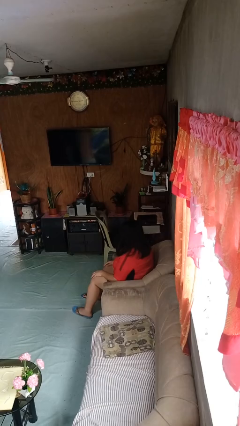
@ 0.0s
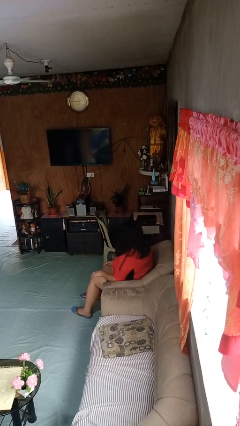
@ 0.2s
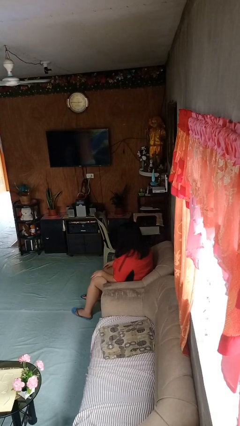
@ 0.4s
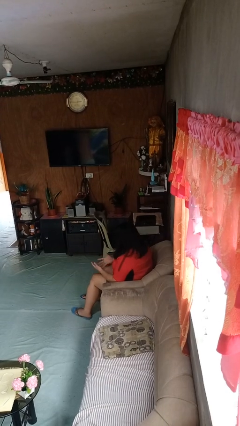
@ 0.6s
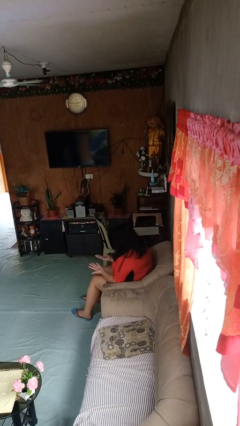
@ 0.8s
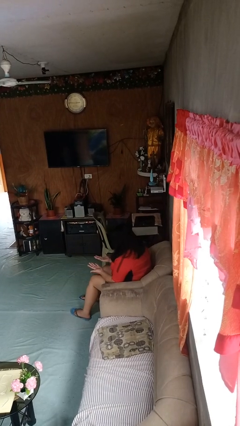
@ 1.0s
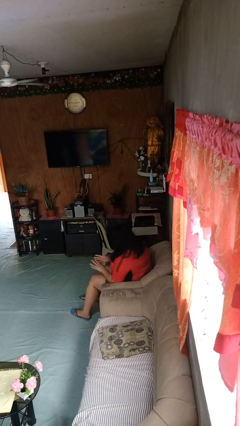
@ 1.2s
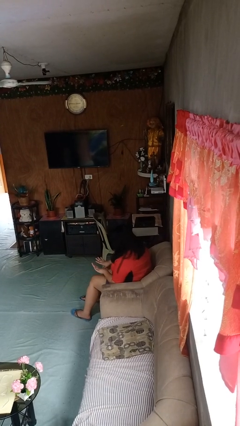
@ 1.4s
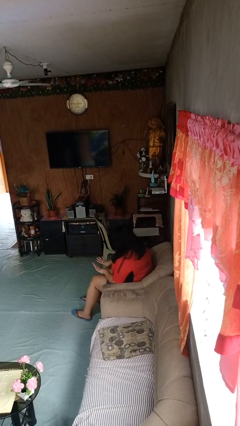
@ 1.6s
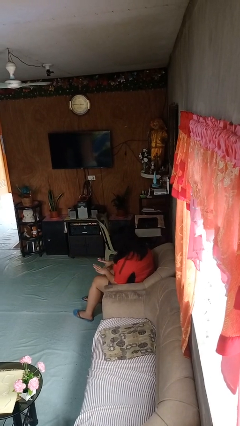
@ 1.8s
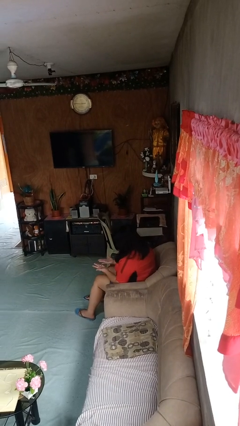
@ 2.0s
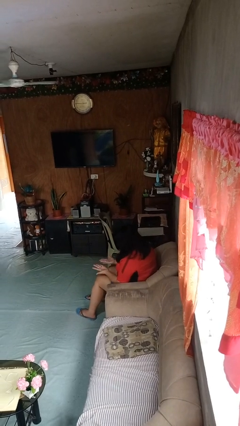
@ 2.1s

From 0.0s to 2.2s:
person looks at hands in lap

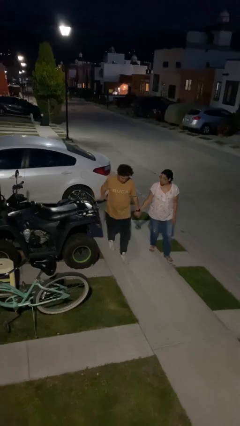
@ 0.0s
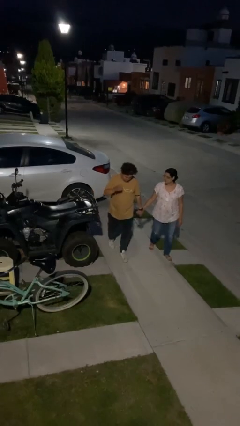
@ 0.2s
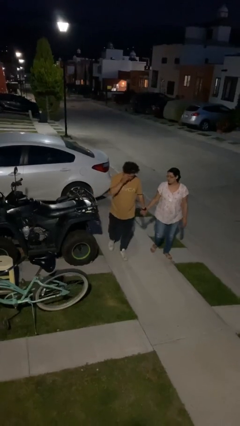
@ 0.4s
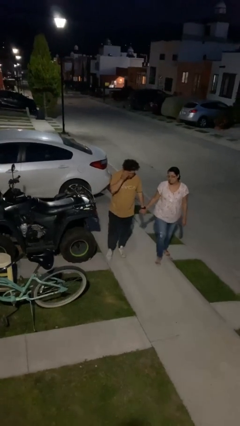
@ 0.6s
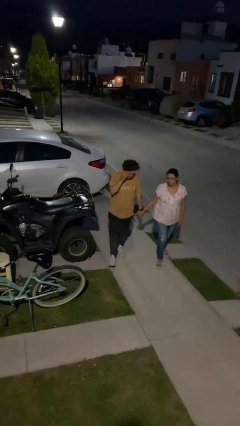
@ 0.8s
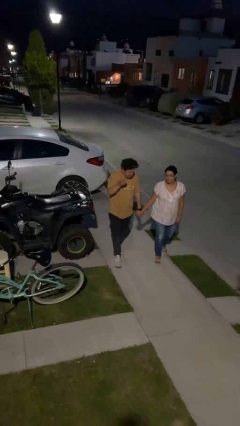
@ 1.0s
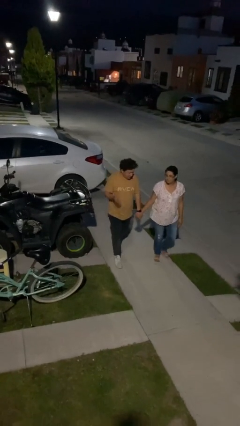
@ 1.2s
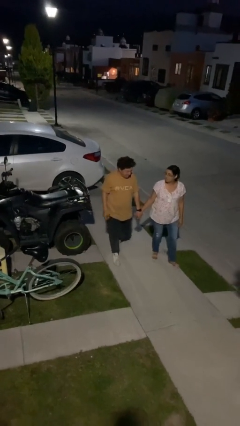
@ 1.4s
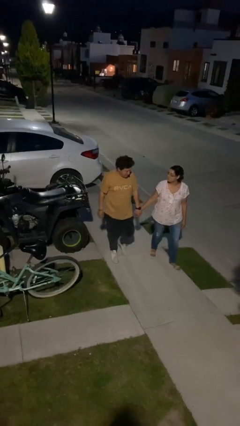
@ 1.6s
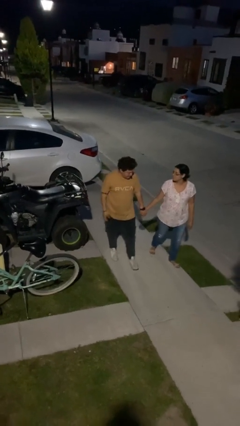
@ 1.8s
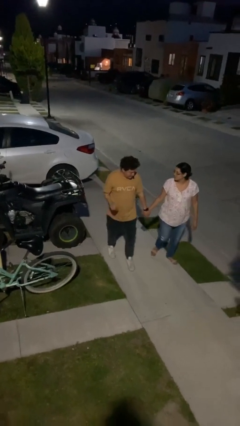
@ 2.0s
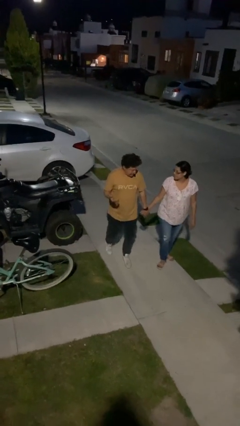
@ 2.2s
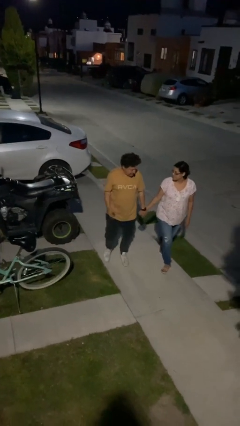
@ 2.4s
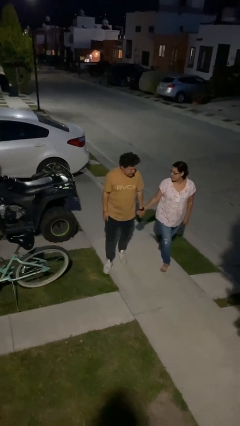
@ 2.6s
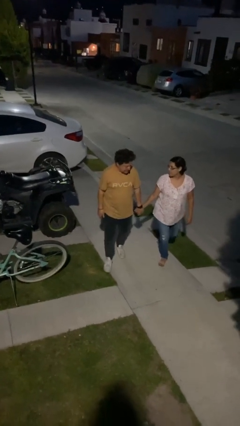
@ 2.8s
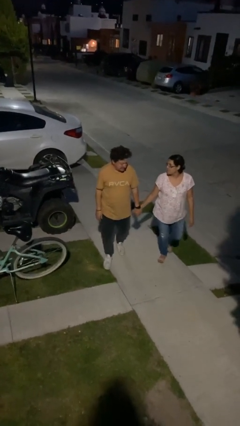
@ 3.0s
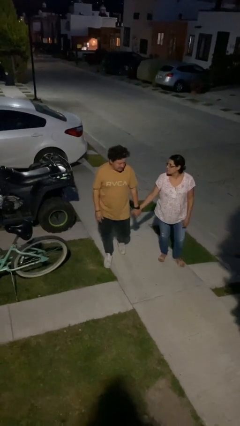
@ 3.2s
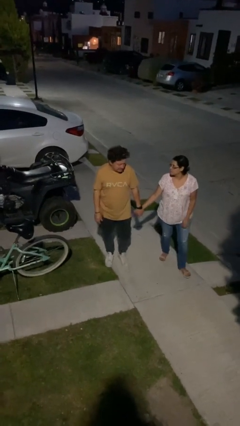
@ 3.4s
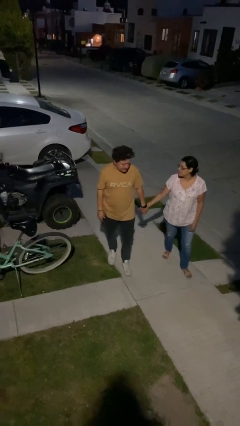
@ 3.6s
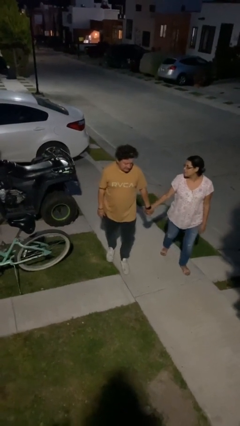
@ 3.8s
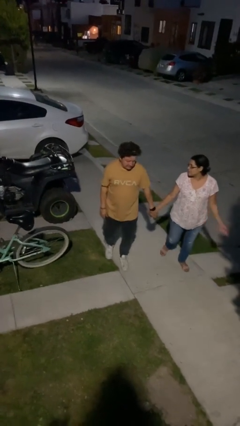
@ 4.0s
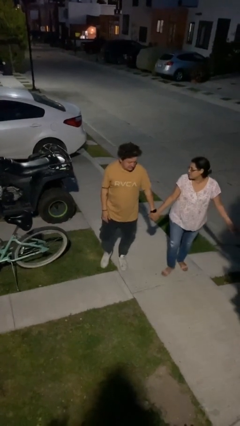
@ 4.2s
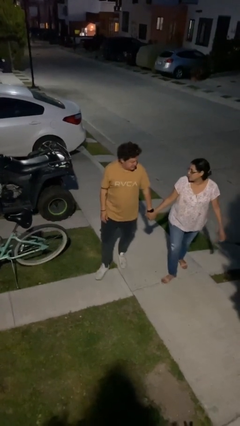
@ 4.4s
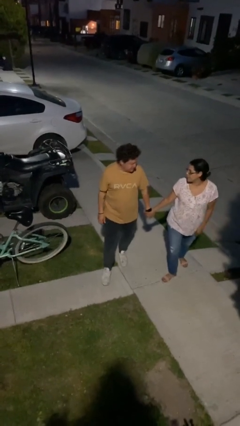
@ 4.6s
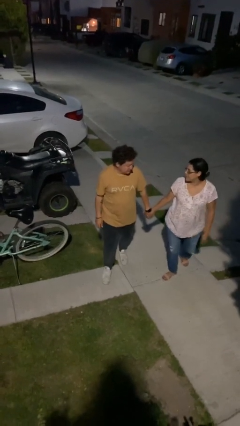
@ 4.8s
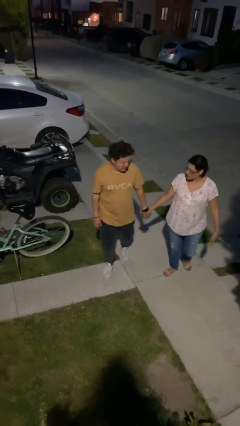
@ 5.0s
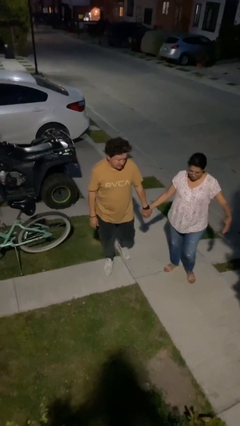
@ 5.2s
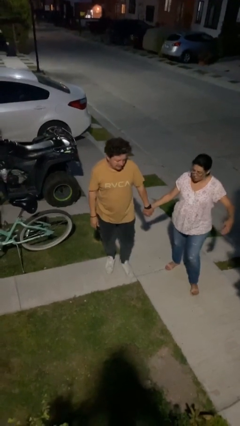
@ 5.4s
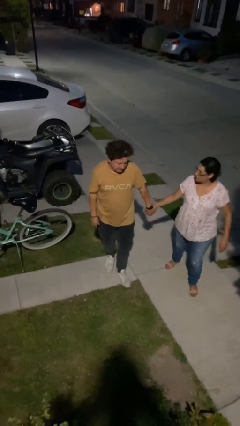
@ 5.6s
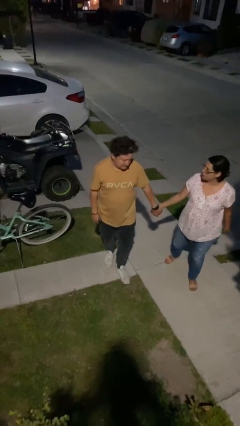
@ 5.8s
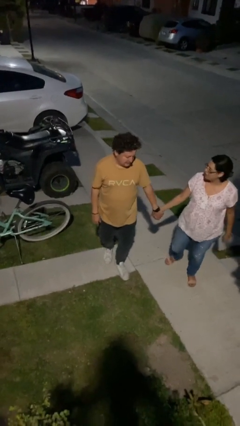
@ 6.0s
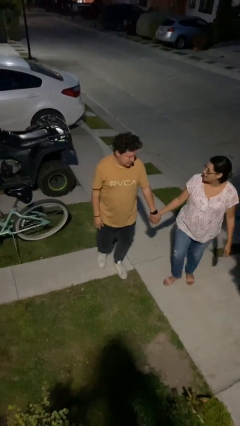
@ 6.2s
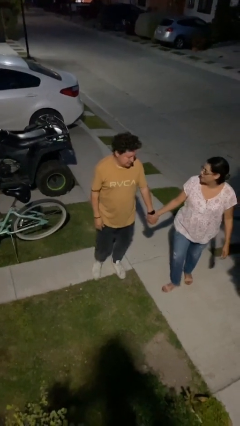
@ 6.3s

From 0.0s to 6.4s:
person holds hand

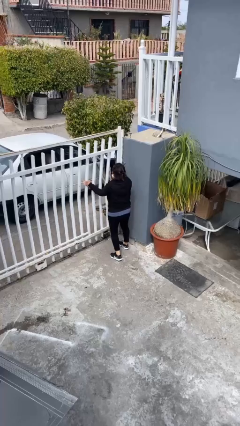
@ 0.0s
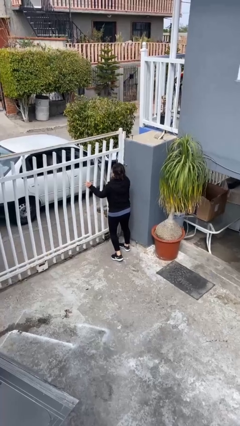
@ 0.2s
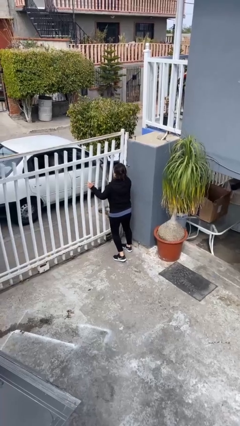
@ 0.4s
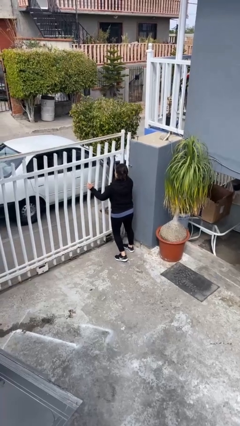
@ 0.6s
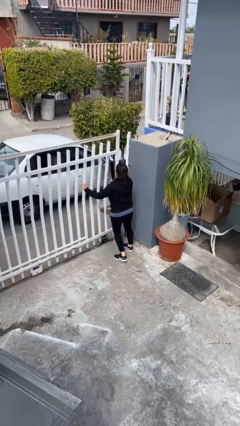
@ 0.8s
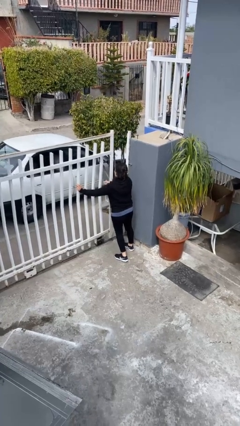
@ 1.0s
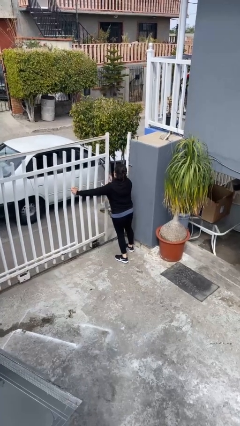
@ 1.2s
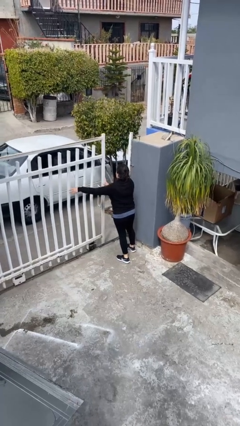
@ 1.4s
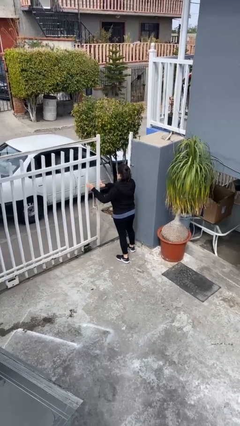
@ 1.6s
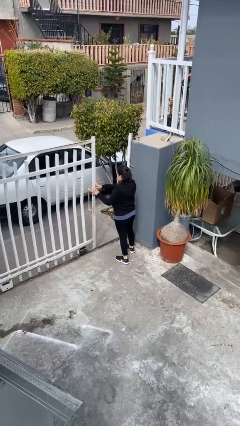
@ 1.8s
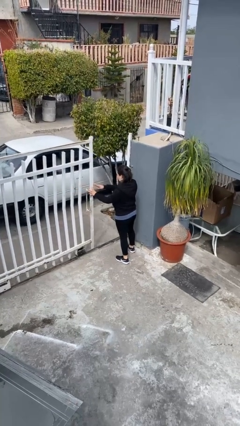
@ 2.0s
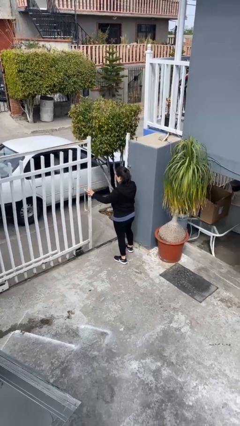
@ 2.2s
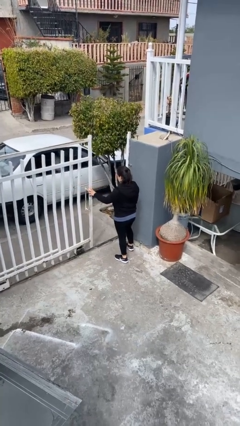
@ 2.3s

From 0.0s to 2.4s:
person opens facility door

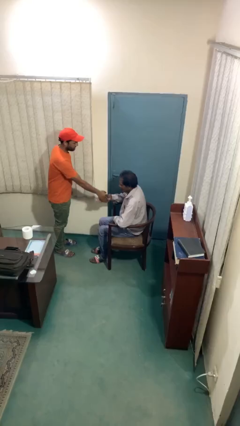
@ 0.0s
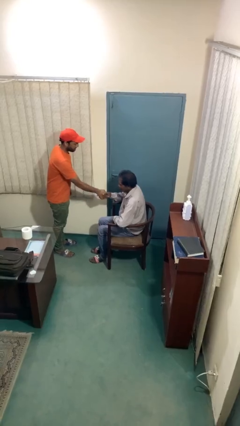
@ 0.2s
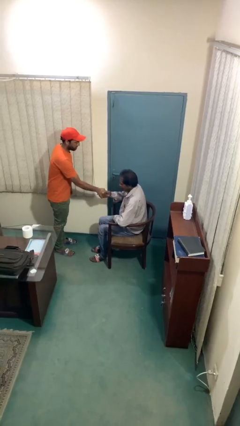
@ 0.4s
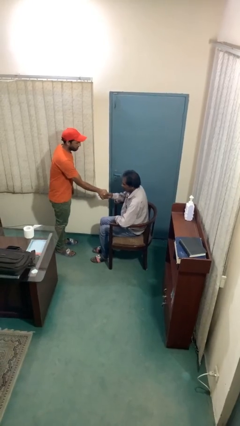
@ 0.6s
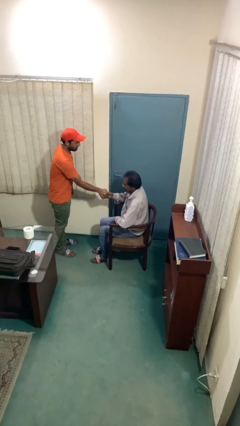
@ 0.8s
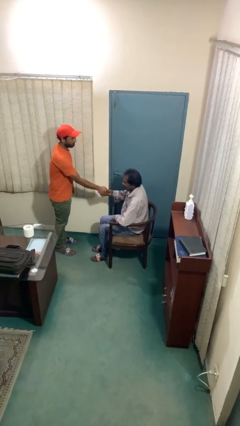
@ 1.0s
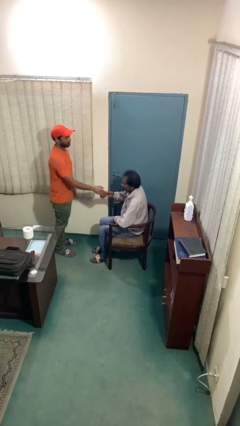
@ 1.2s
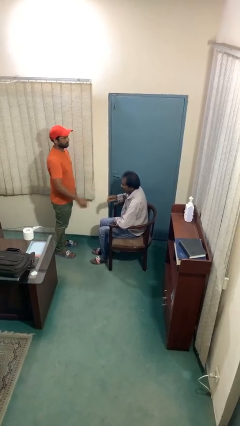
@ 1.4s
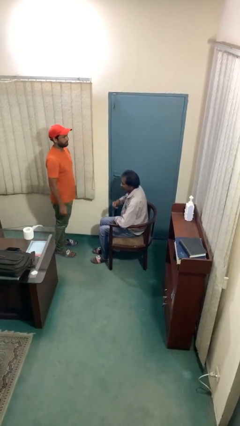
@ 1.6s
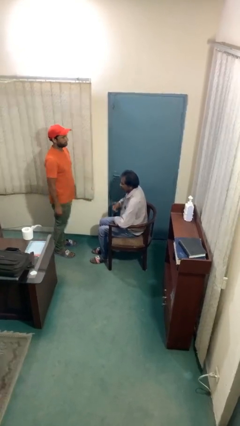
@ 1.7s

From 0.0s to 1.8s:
person shakes hand

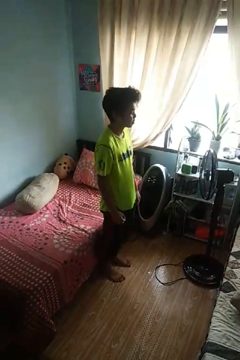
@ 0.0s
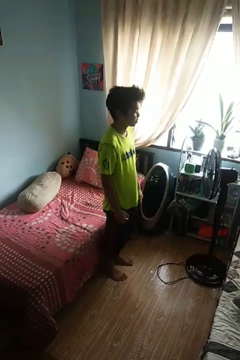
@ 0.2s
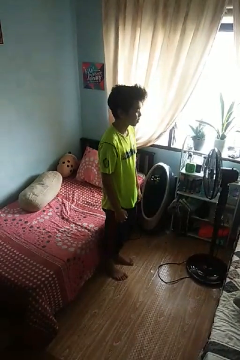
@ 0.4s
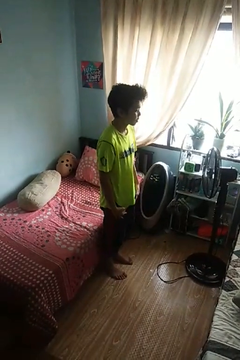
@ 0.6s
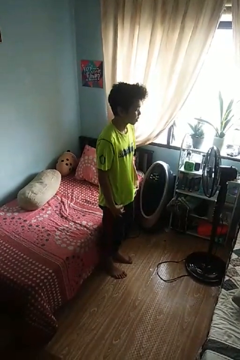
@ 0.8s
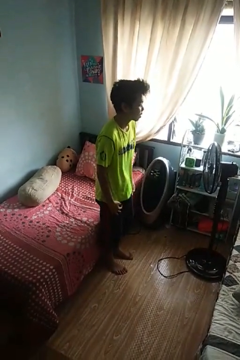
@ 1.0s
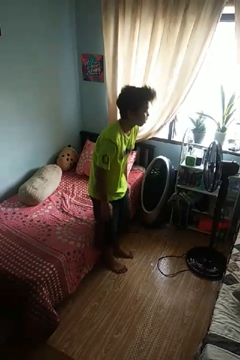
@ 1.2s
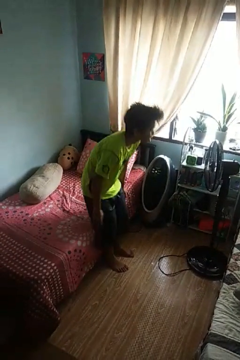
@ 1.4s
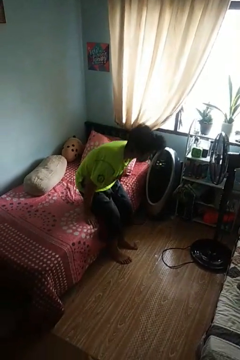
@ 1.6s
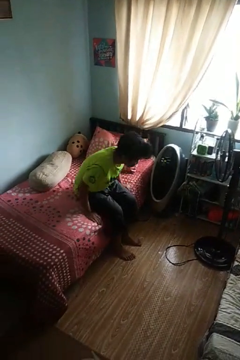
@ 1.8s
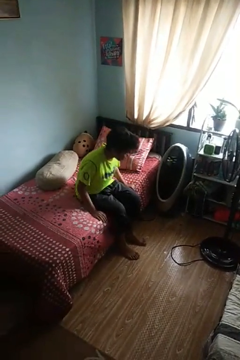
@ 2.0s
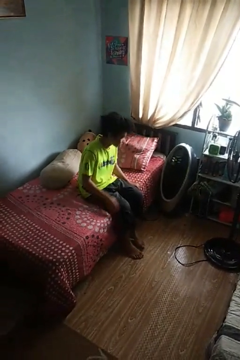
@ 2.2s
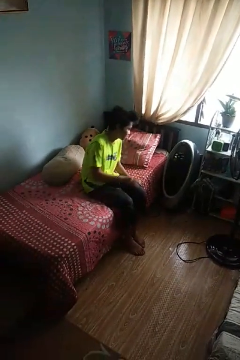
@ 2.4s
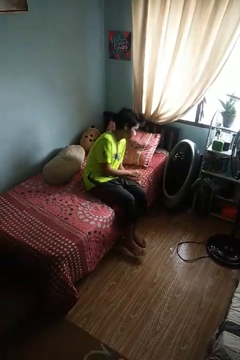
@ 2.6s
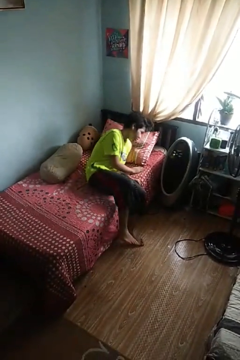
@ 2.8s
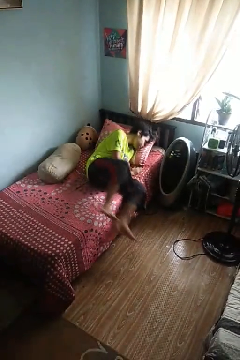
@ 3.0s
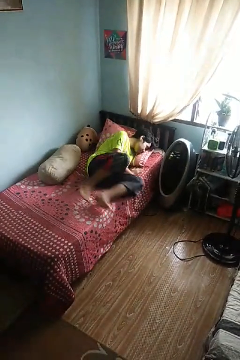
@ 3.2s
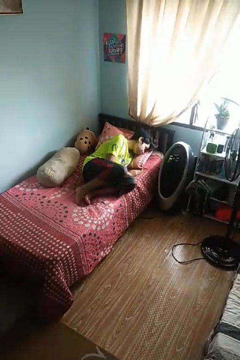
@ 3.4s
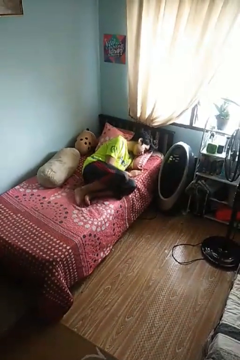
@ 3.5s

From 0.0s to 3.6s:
person lies down on bed

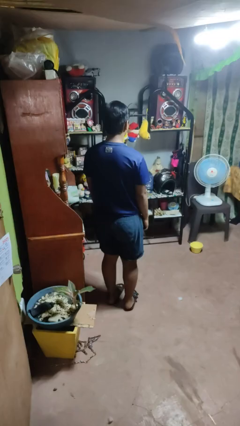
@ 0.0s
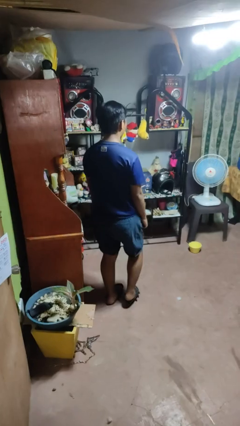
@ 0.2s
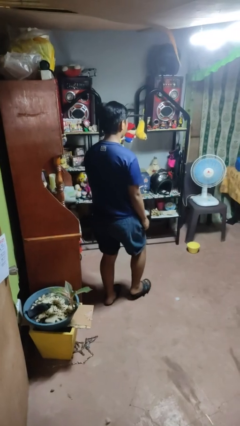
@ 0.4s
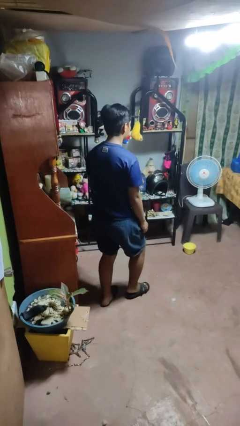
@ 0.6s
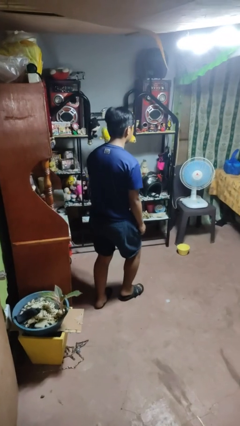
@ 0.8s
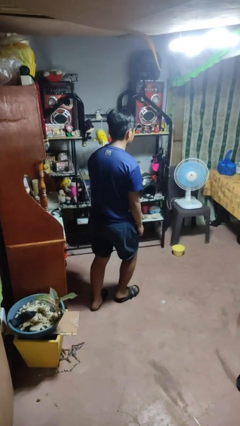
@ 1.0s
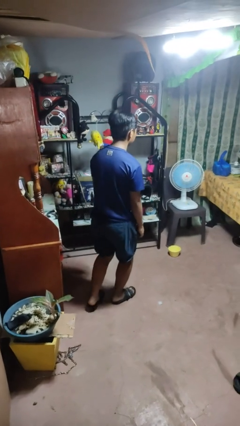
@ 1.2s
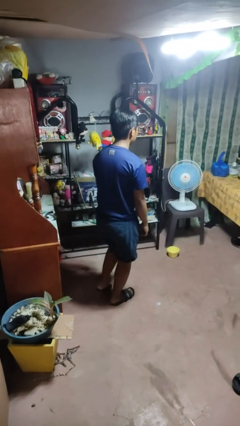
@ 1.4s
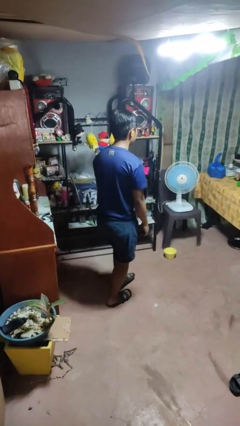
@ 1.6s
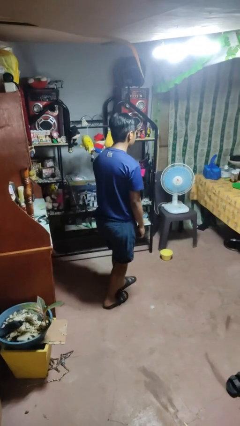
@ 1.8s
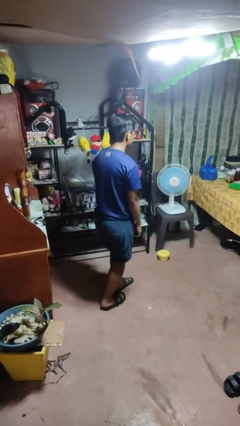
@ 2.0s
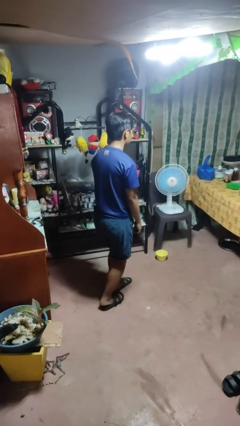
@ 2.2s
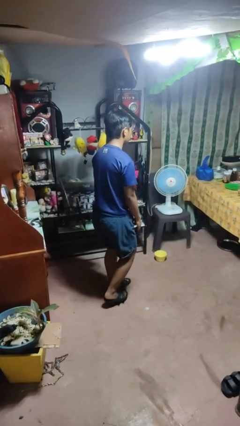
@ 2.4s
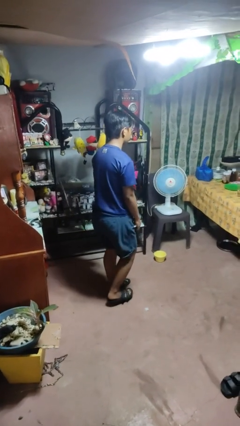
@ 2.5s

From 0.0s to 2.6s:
person walks tiptoe
